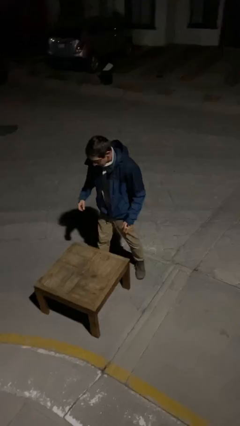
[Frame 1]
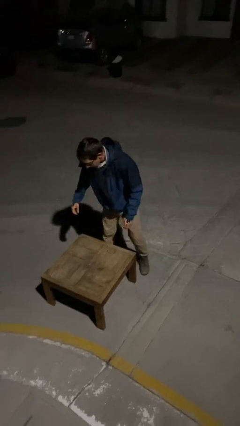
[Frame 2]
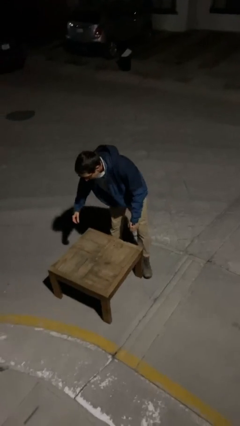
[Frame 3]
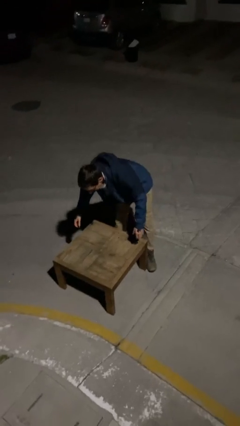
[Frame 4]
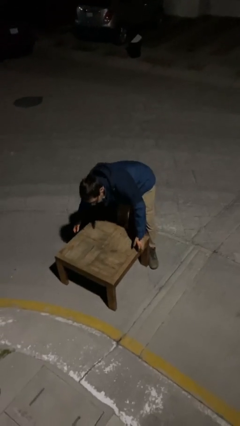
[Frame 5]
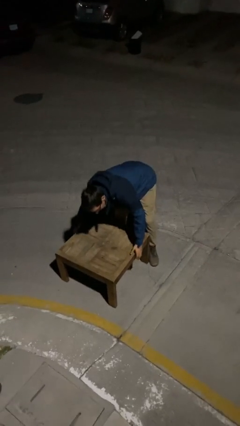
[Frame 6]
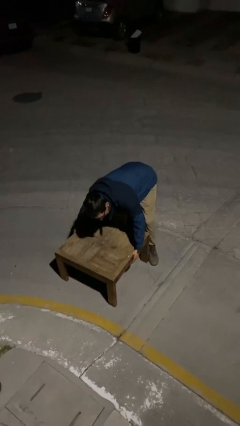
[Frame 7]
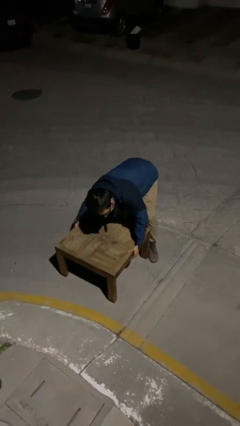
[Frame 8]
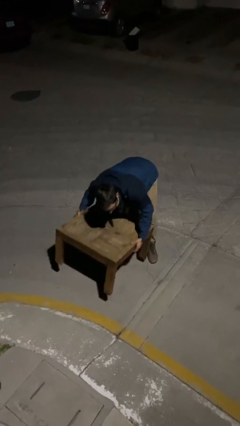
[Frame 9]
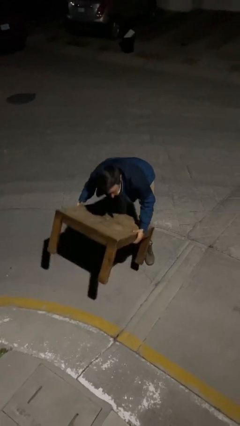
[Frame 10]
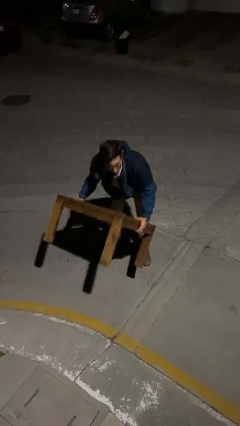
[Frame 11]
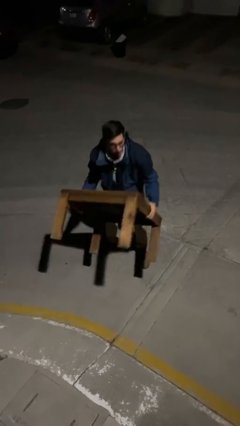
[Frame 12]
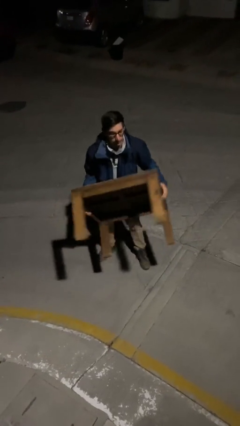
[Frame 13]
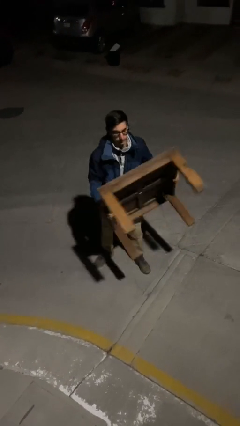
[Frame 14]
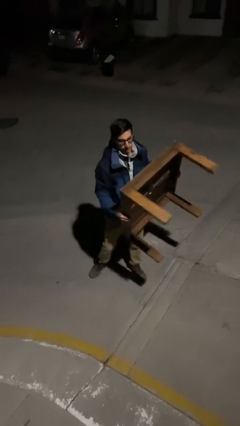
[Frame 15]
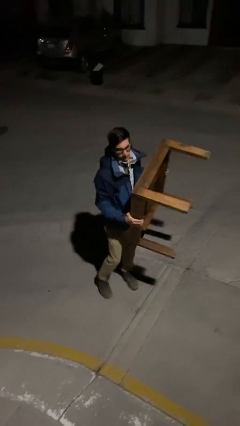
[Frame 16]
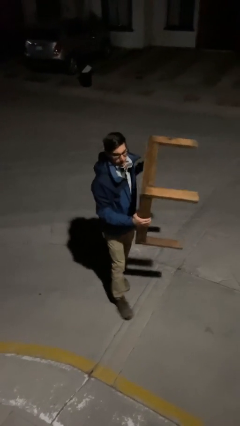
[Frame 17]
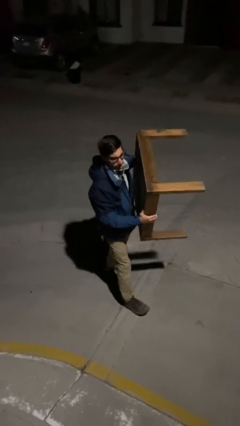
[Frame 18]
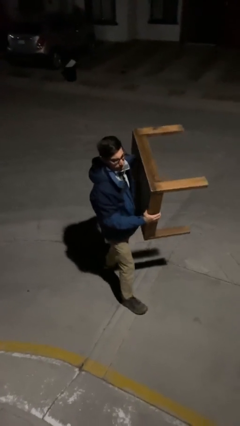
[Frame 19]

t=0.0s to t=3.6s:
person picks up object from floor

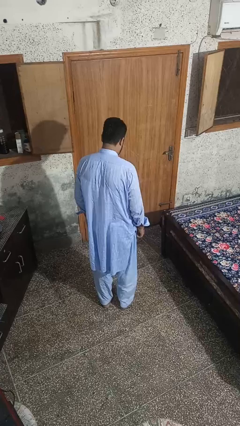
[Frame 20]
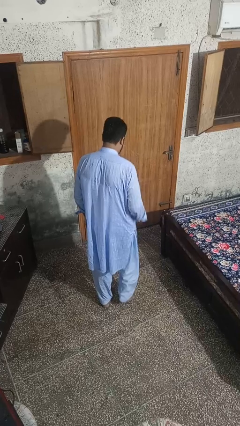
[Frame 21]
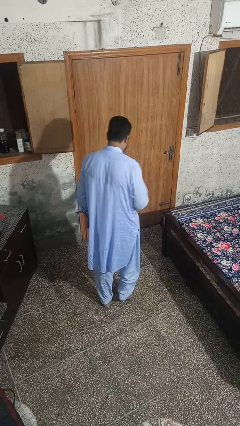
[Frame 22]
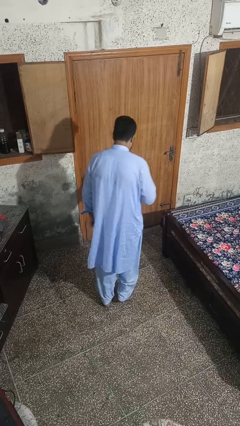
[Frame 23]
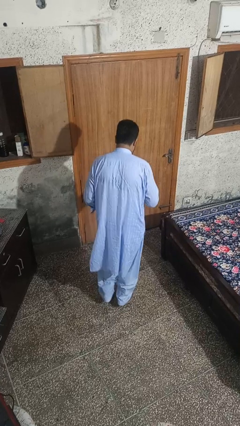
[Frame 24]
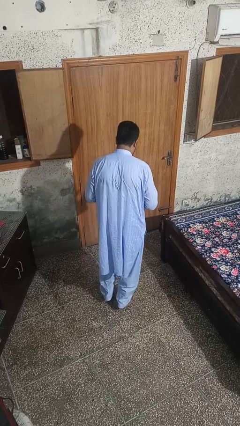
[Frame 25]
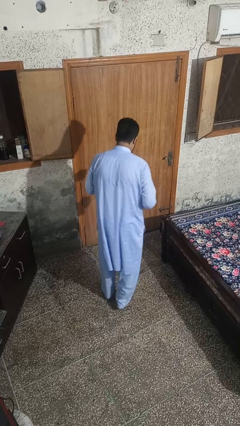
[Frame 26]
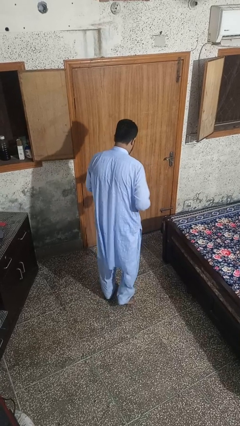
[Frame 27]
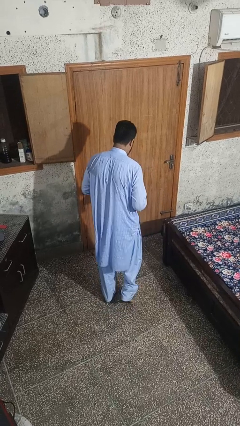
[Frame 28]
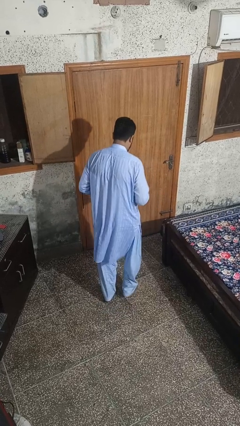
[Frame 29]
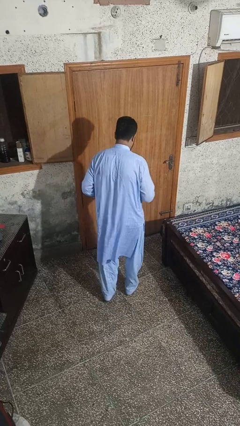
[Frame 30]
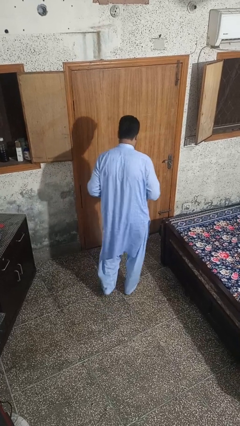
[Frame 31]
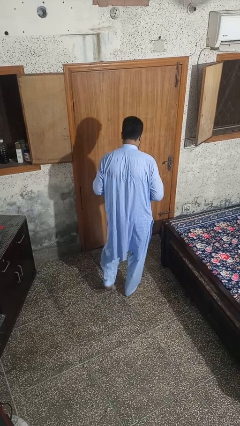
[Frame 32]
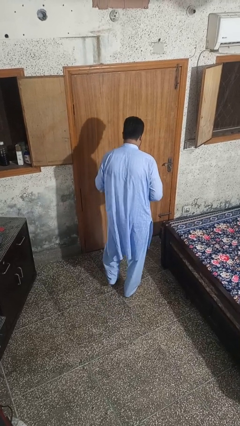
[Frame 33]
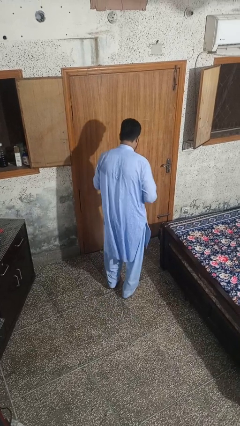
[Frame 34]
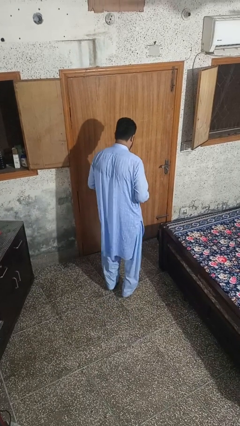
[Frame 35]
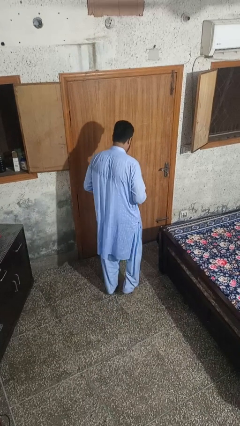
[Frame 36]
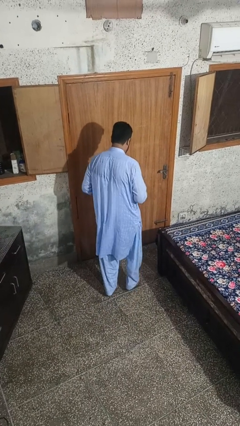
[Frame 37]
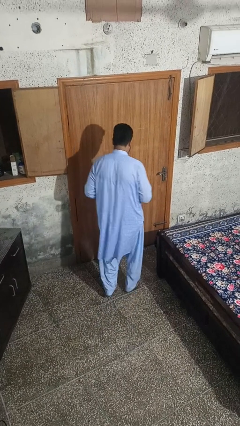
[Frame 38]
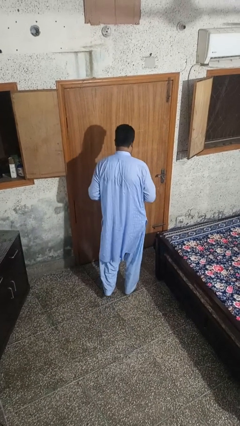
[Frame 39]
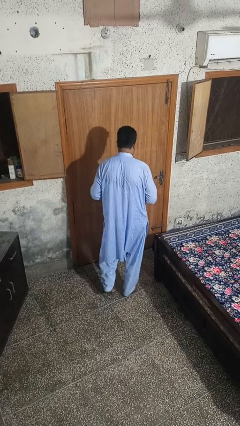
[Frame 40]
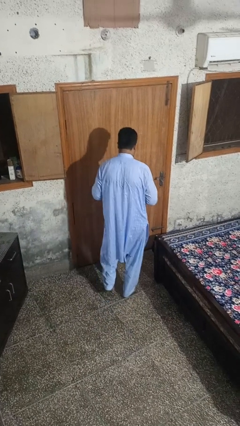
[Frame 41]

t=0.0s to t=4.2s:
person walks tiptoe

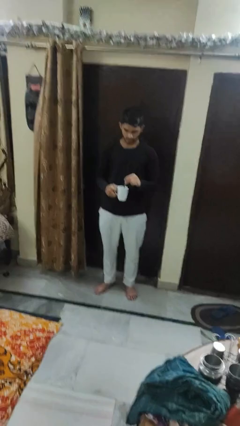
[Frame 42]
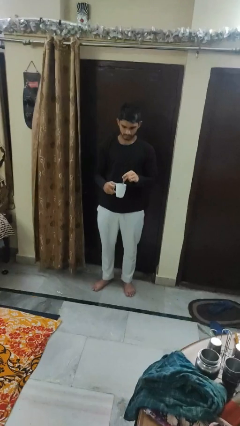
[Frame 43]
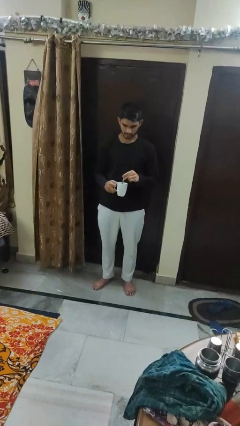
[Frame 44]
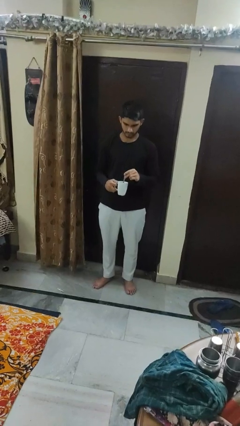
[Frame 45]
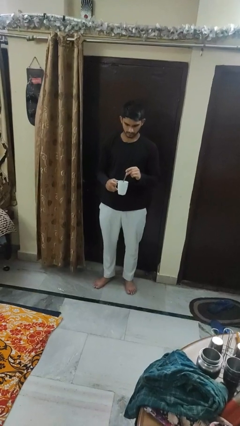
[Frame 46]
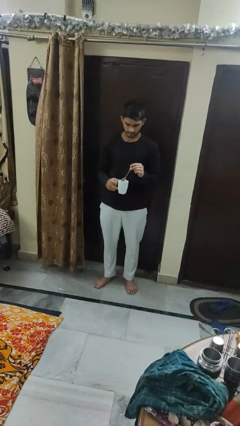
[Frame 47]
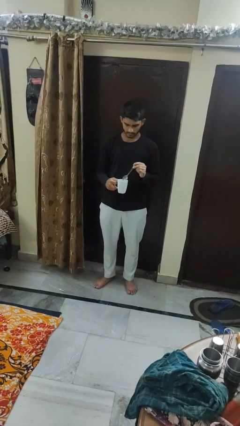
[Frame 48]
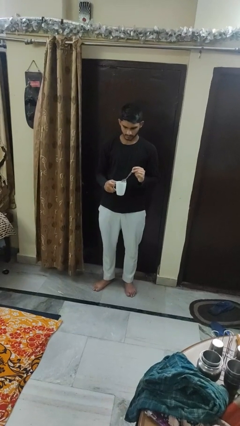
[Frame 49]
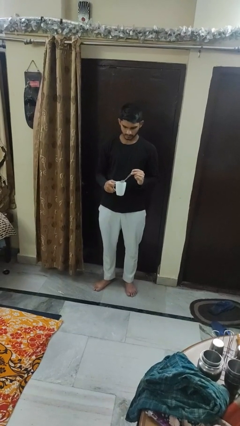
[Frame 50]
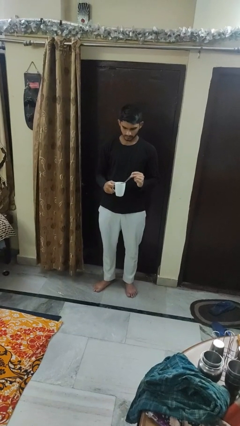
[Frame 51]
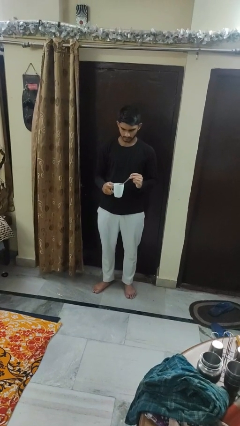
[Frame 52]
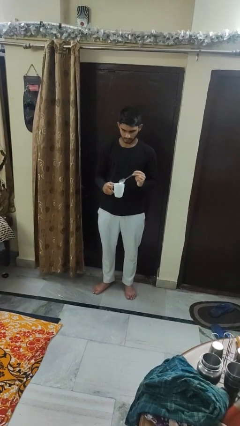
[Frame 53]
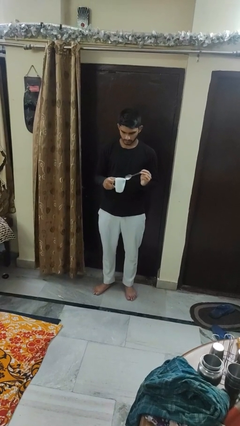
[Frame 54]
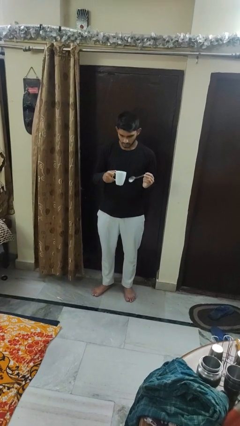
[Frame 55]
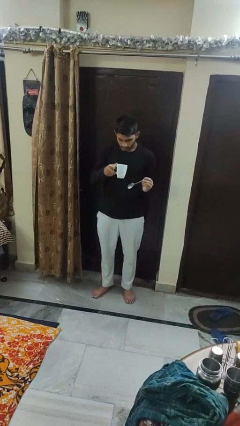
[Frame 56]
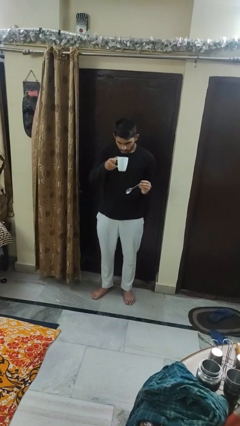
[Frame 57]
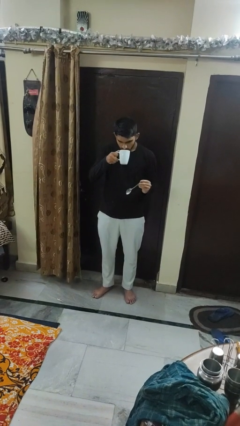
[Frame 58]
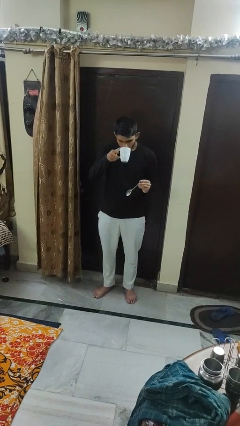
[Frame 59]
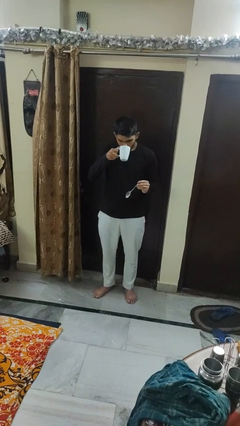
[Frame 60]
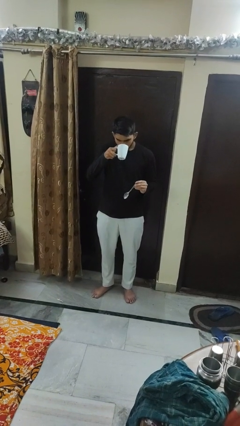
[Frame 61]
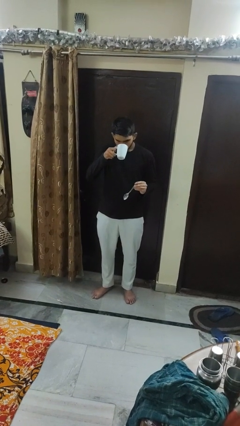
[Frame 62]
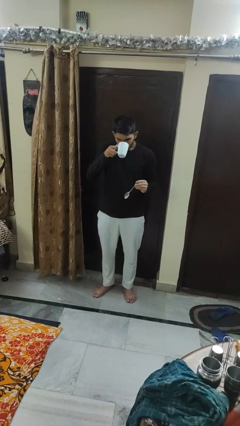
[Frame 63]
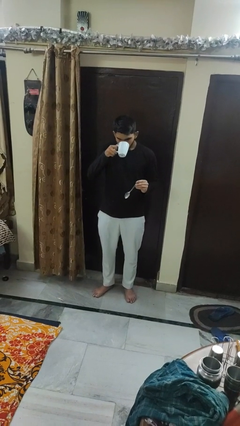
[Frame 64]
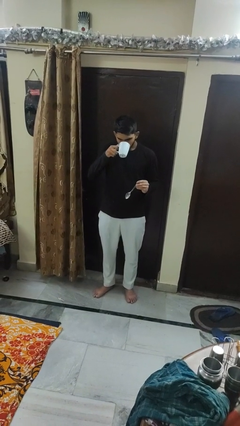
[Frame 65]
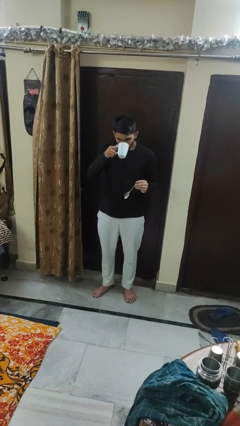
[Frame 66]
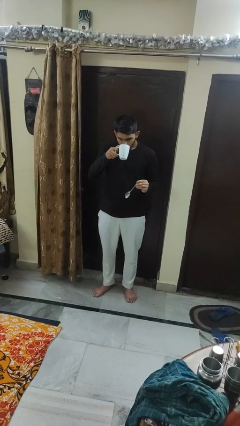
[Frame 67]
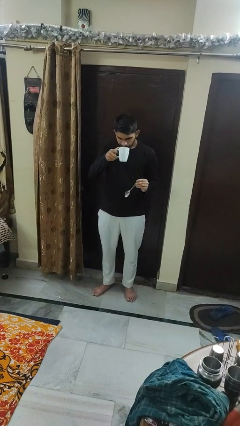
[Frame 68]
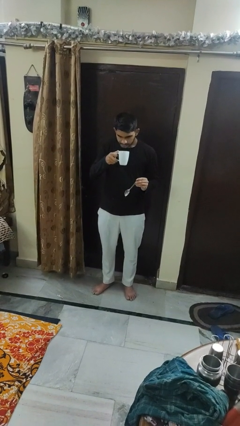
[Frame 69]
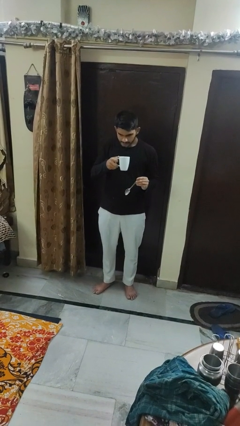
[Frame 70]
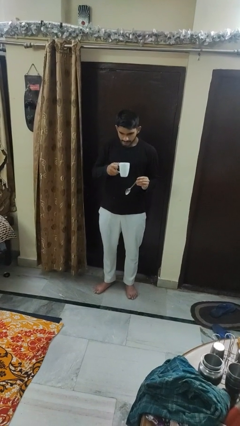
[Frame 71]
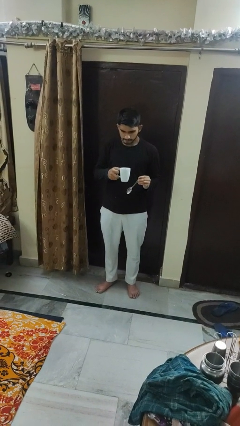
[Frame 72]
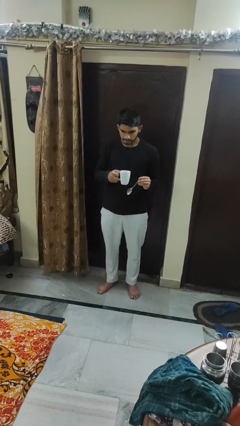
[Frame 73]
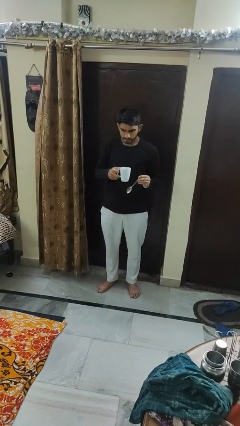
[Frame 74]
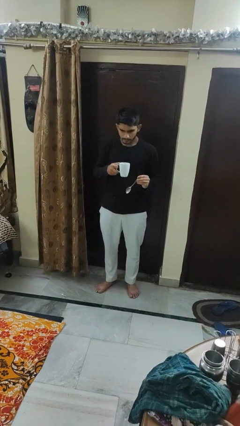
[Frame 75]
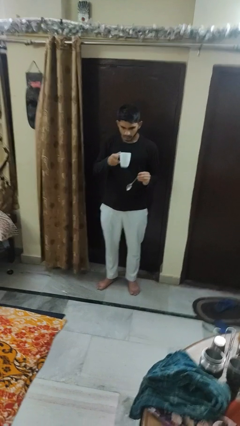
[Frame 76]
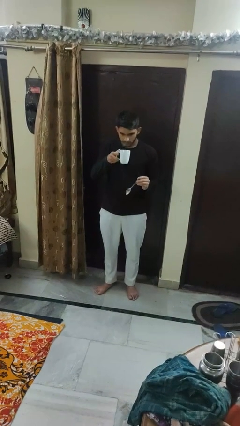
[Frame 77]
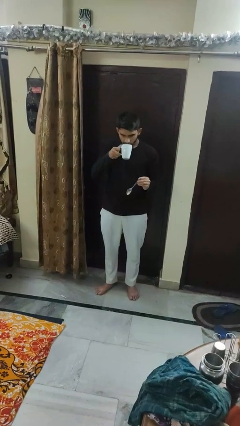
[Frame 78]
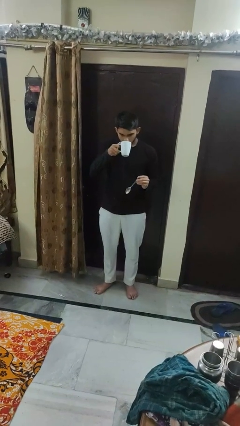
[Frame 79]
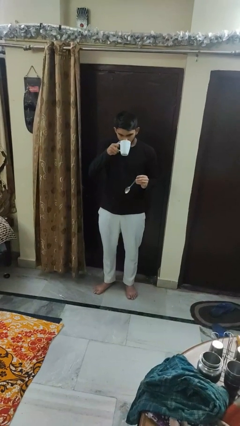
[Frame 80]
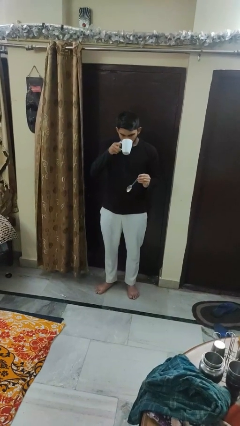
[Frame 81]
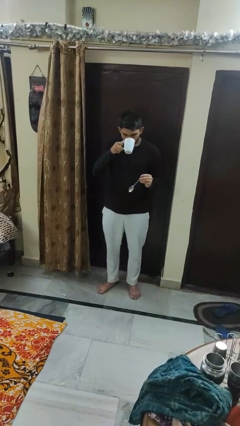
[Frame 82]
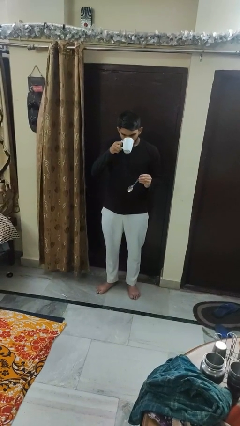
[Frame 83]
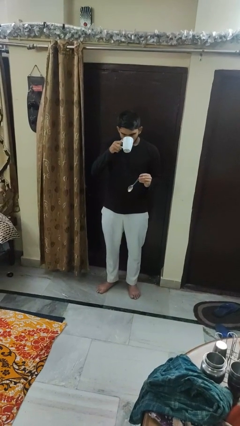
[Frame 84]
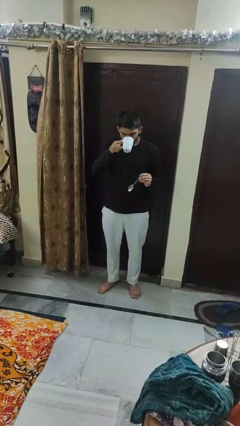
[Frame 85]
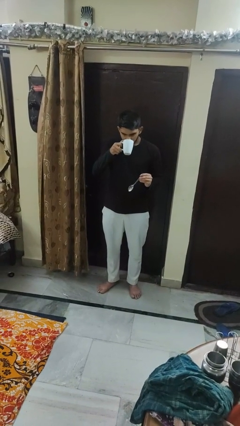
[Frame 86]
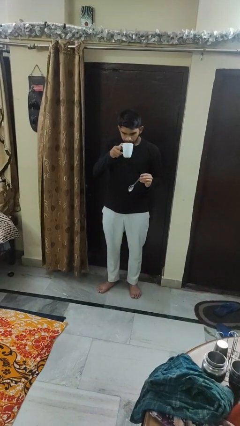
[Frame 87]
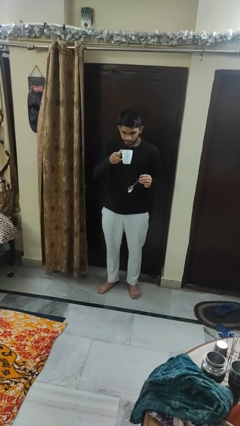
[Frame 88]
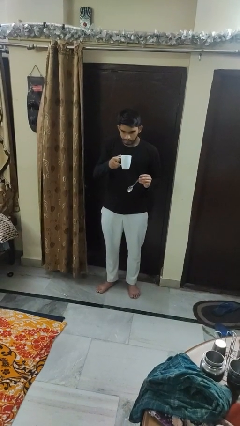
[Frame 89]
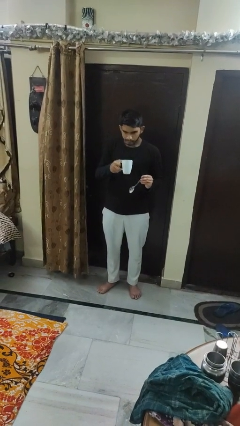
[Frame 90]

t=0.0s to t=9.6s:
person drinks from mug

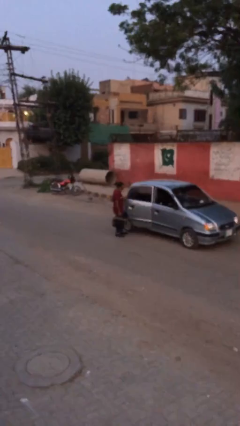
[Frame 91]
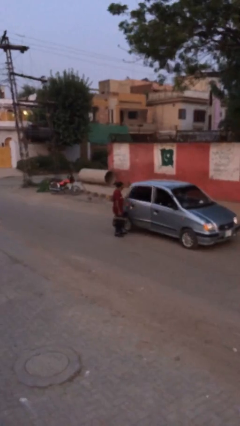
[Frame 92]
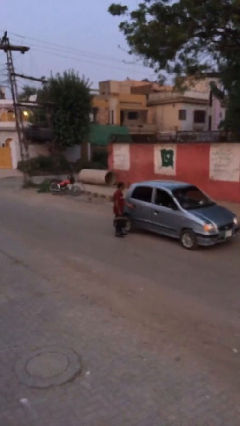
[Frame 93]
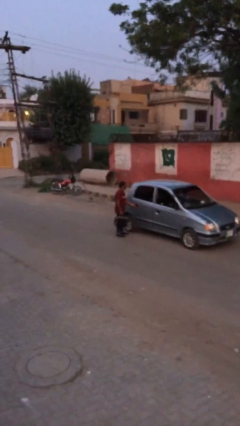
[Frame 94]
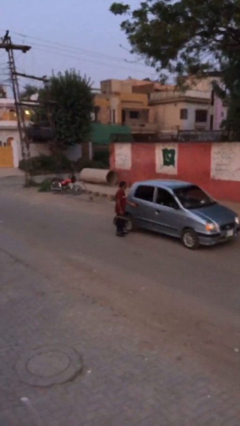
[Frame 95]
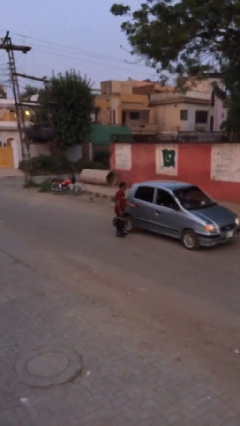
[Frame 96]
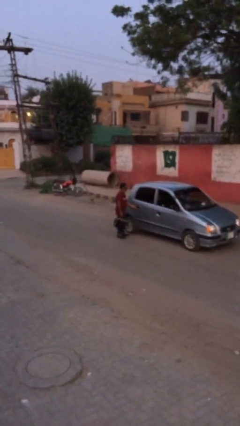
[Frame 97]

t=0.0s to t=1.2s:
person closes car door
